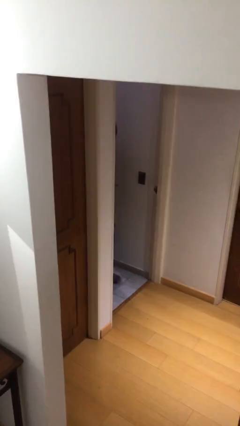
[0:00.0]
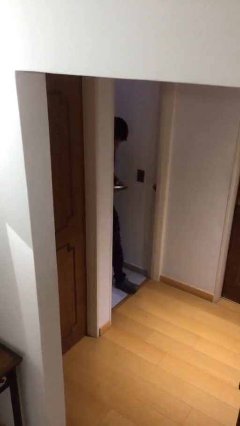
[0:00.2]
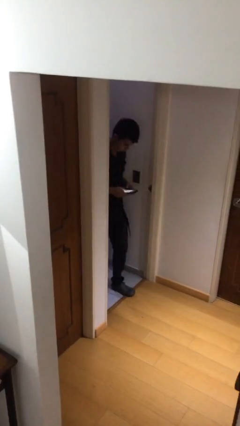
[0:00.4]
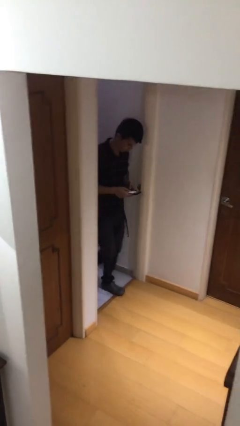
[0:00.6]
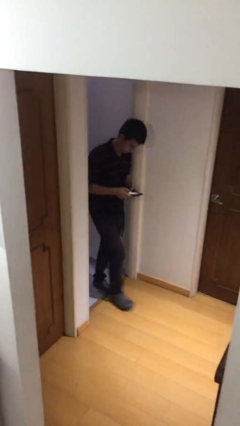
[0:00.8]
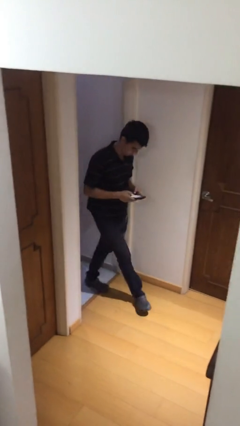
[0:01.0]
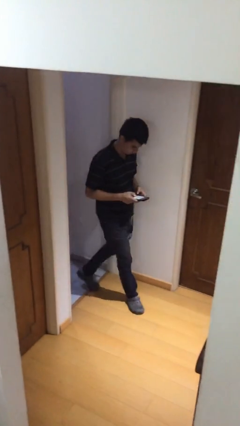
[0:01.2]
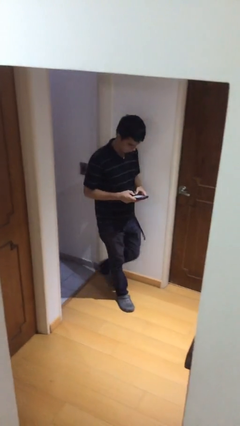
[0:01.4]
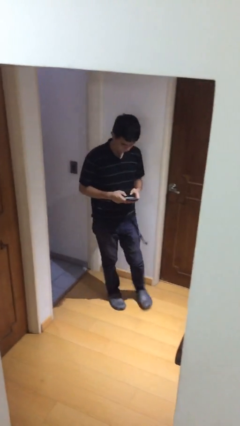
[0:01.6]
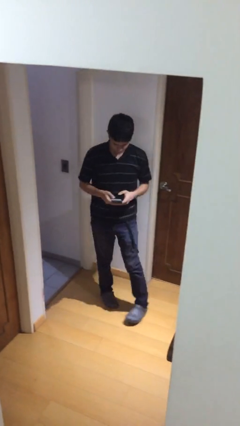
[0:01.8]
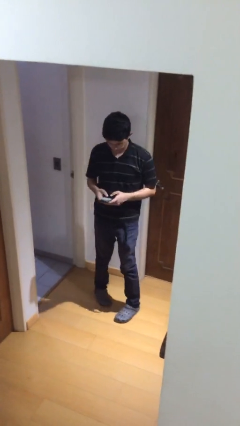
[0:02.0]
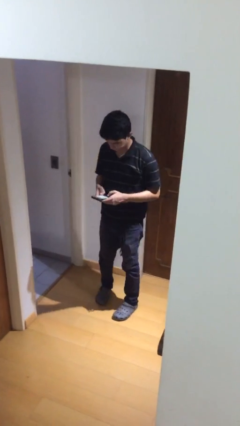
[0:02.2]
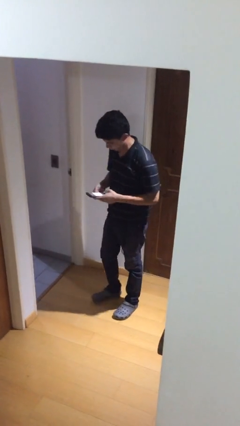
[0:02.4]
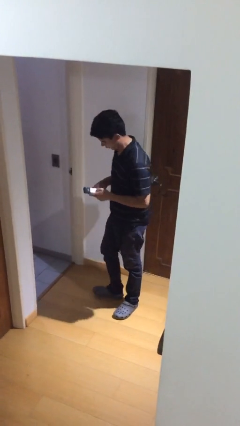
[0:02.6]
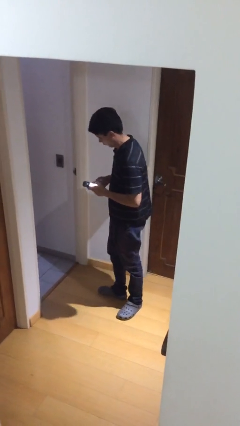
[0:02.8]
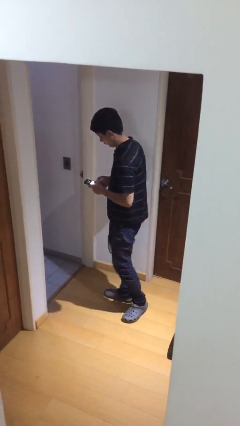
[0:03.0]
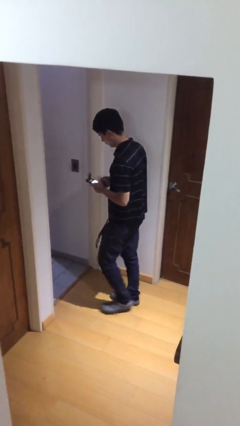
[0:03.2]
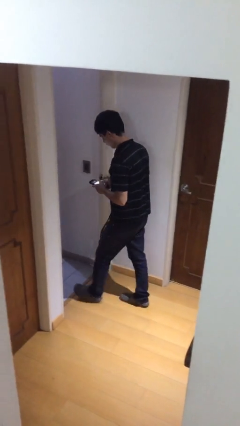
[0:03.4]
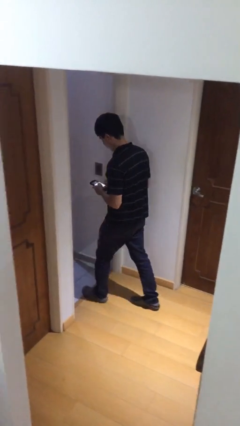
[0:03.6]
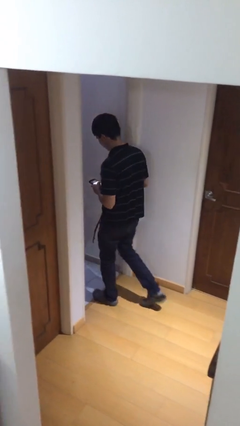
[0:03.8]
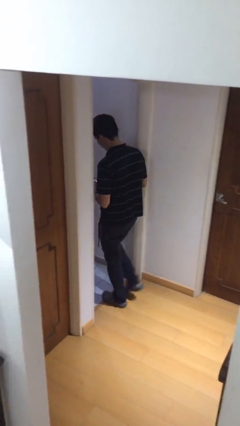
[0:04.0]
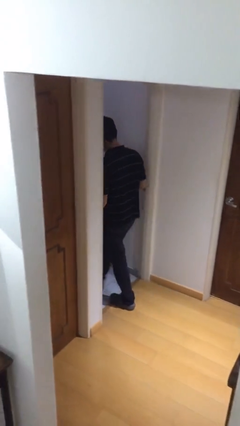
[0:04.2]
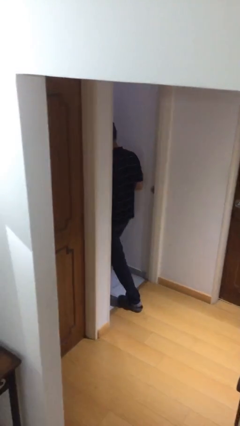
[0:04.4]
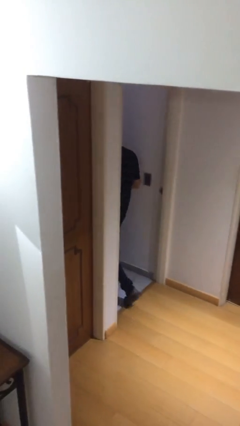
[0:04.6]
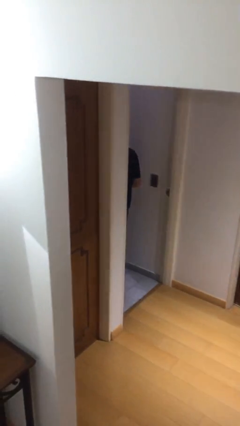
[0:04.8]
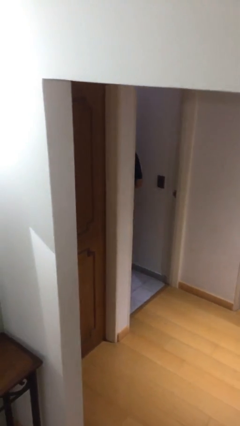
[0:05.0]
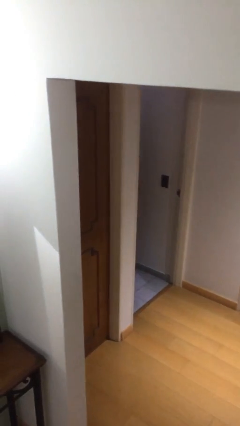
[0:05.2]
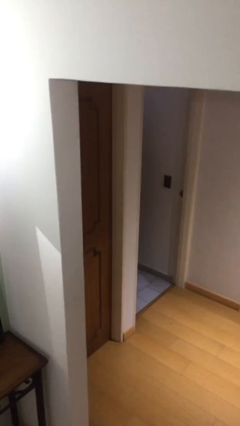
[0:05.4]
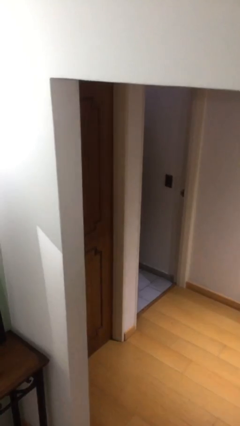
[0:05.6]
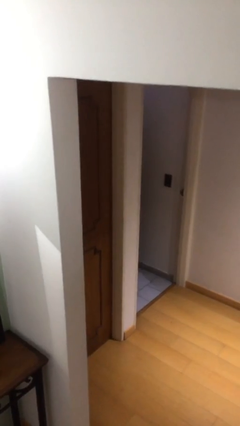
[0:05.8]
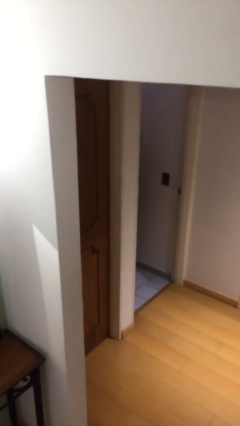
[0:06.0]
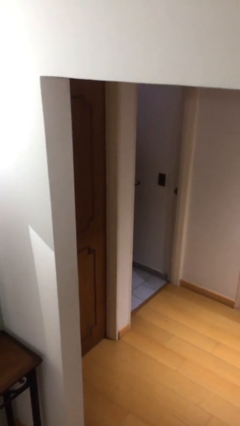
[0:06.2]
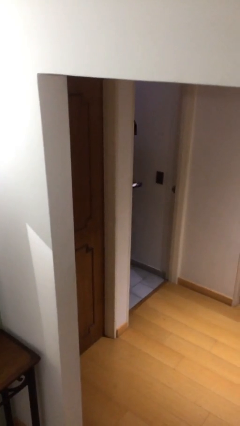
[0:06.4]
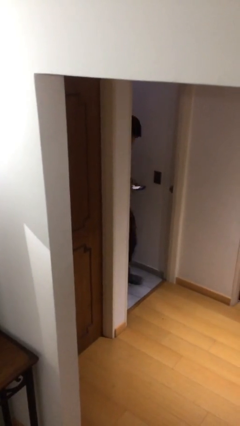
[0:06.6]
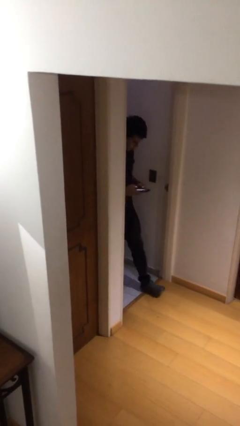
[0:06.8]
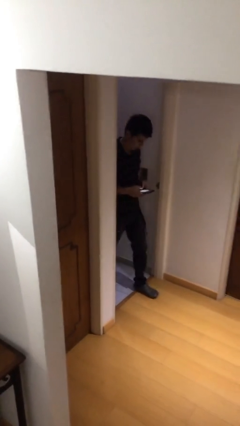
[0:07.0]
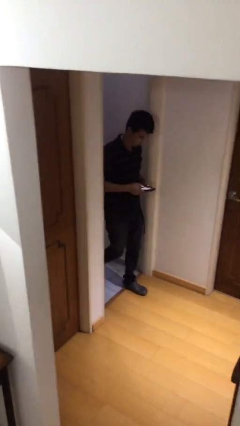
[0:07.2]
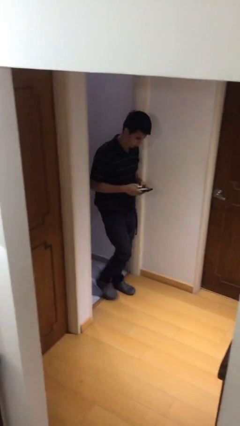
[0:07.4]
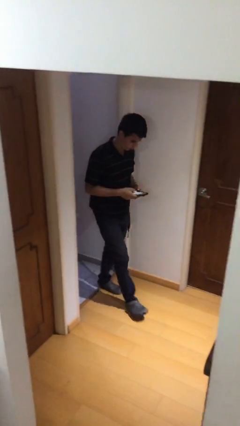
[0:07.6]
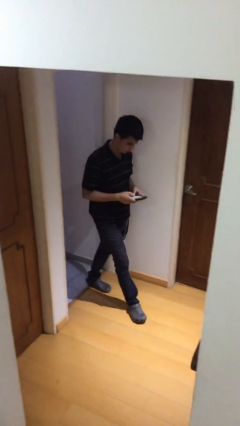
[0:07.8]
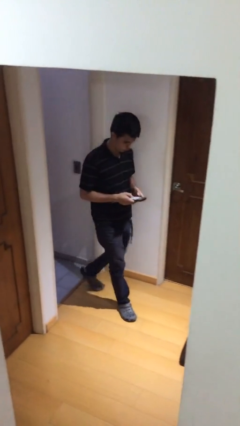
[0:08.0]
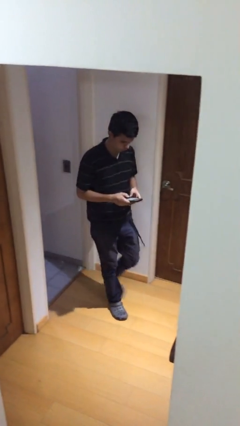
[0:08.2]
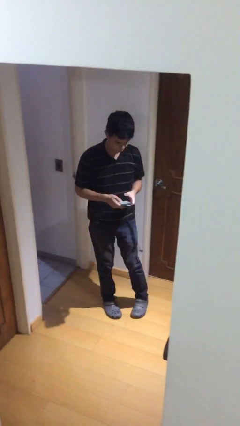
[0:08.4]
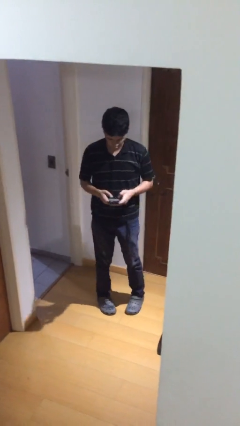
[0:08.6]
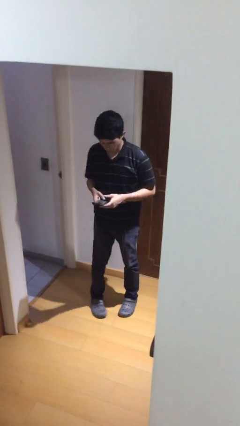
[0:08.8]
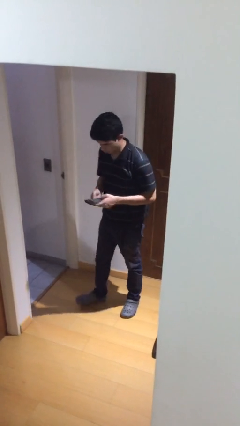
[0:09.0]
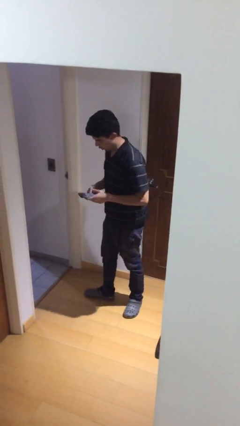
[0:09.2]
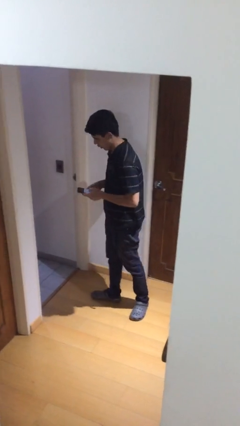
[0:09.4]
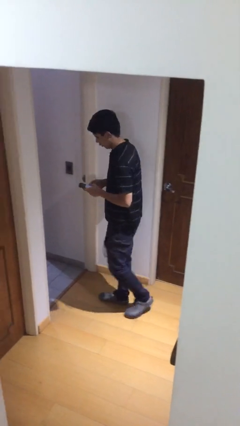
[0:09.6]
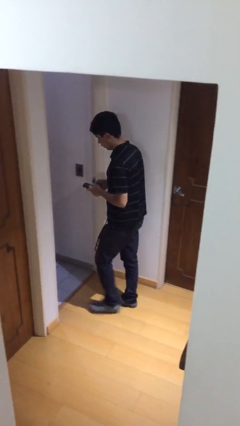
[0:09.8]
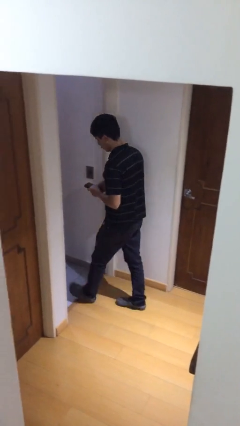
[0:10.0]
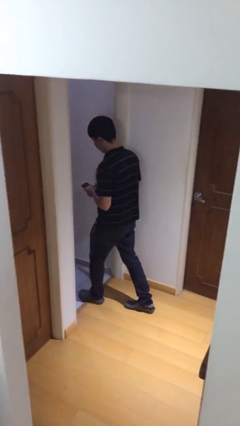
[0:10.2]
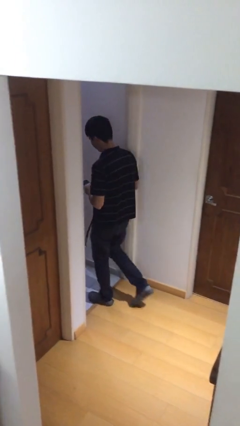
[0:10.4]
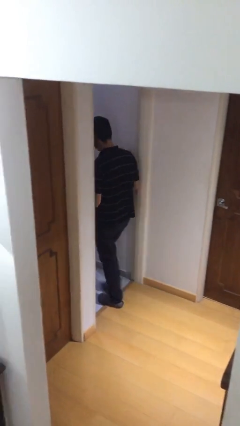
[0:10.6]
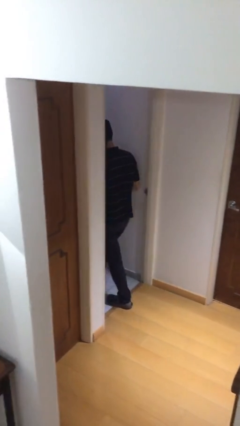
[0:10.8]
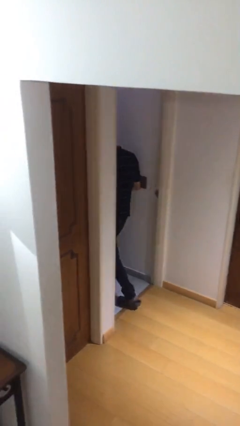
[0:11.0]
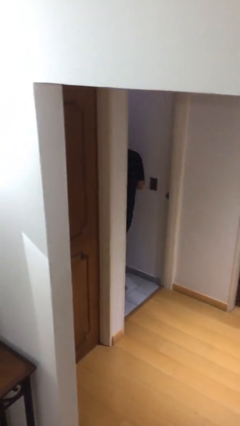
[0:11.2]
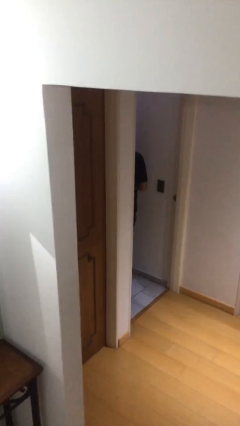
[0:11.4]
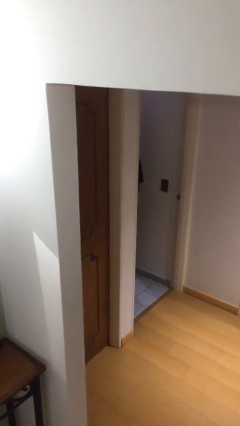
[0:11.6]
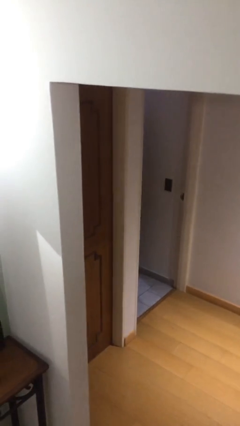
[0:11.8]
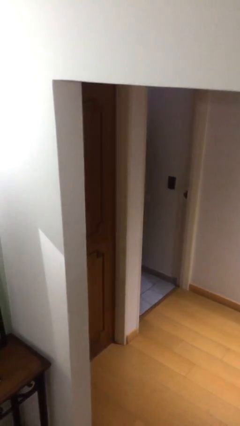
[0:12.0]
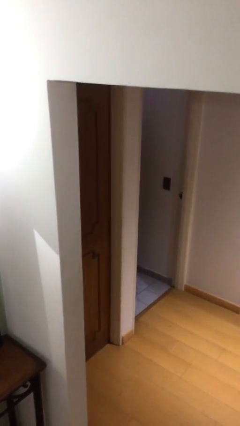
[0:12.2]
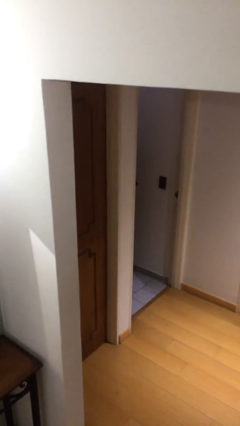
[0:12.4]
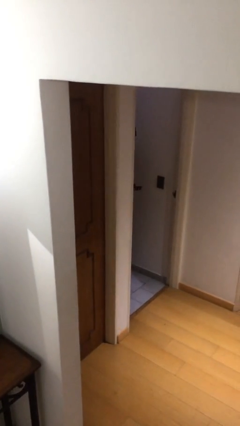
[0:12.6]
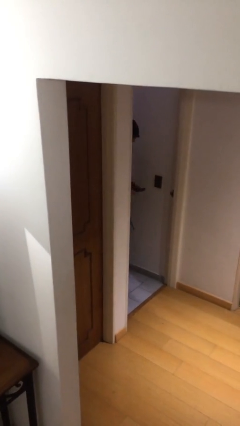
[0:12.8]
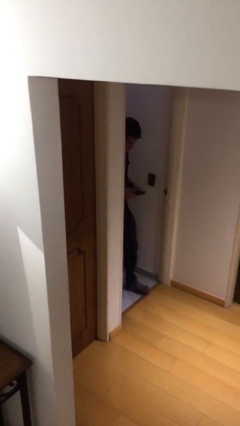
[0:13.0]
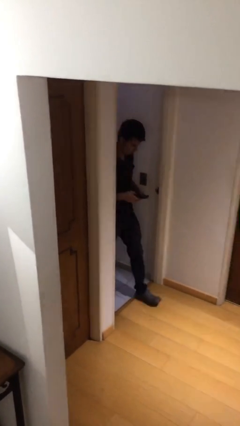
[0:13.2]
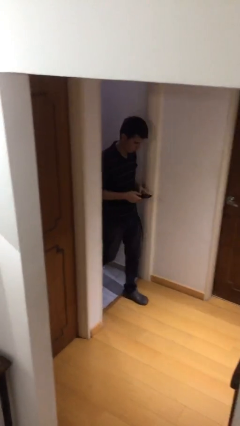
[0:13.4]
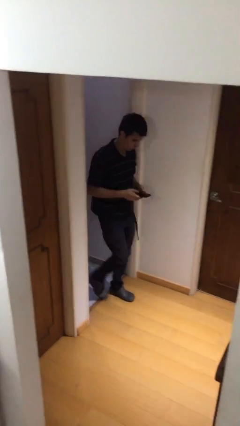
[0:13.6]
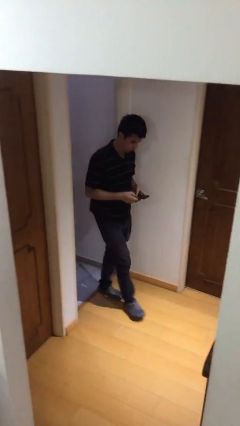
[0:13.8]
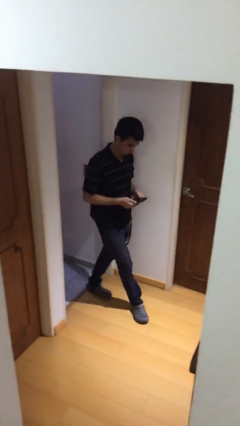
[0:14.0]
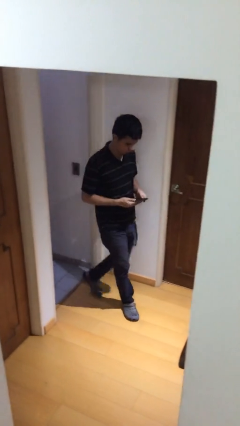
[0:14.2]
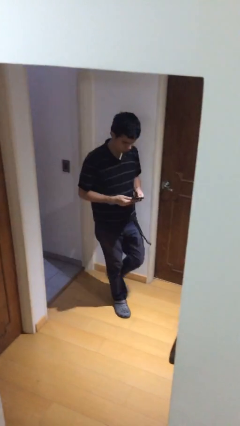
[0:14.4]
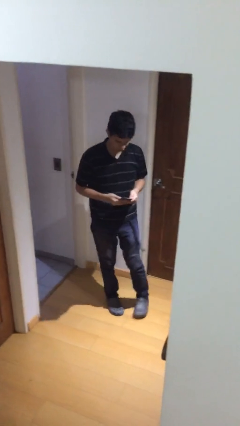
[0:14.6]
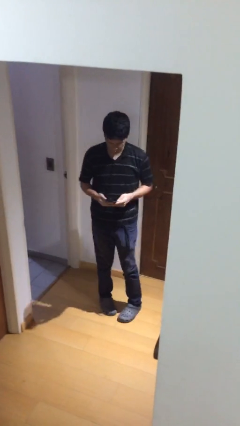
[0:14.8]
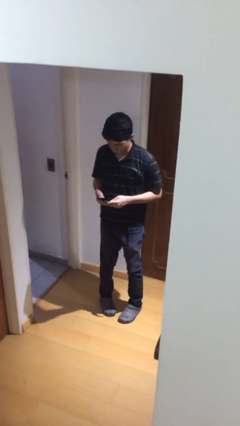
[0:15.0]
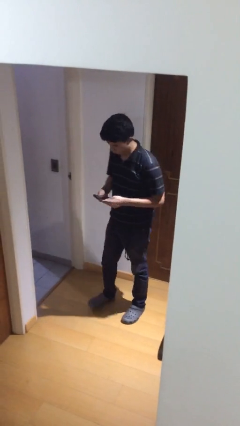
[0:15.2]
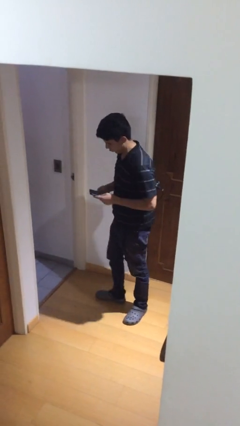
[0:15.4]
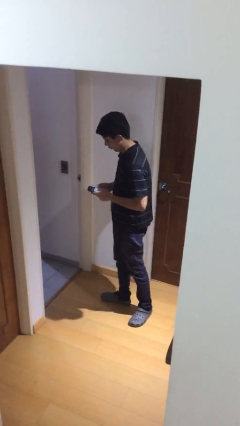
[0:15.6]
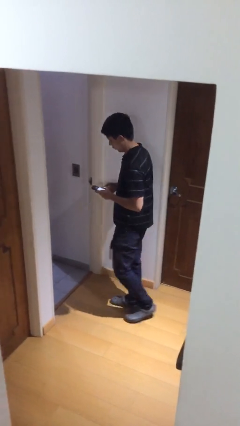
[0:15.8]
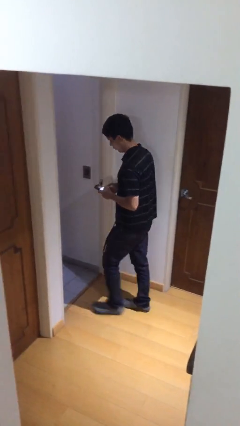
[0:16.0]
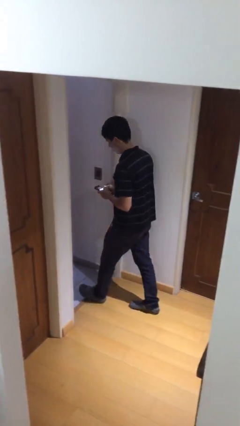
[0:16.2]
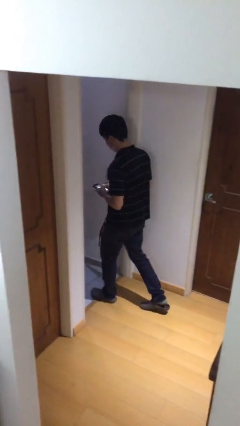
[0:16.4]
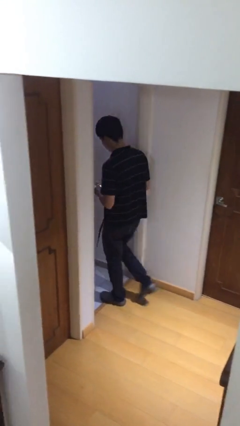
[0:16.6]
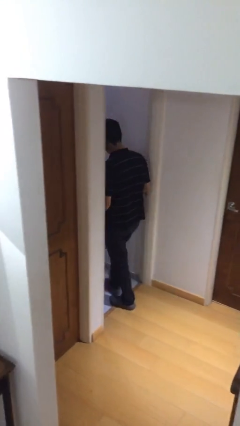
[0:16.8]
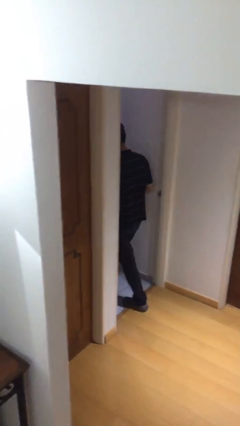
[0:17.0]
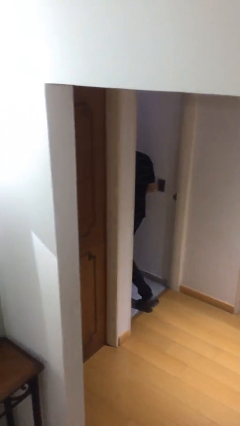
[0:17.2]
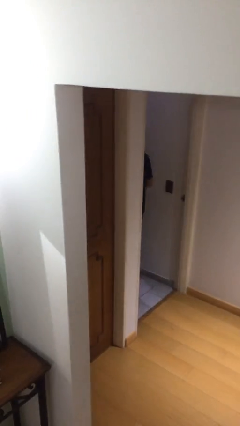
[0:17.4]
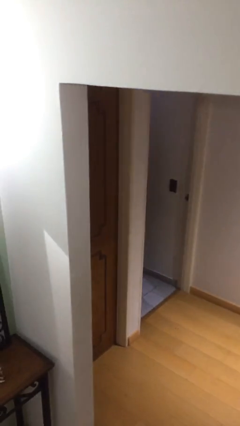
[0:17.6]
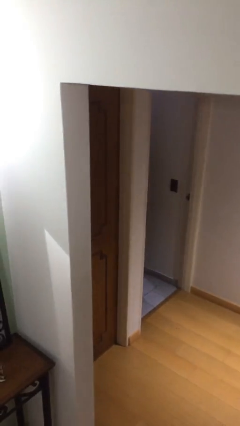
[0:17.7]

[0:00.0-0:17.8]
person texts on phone

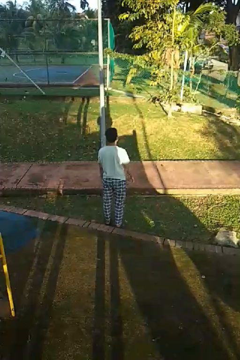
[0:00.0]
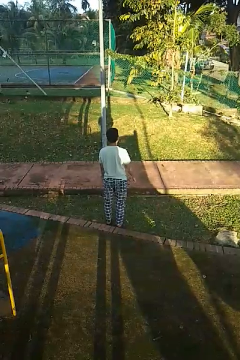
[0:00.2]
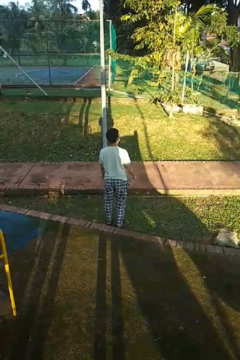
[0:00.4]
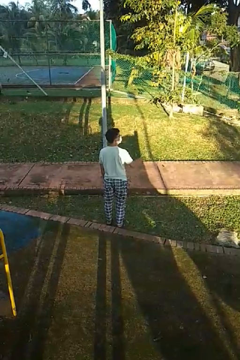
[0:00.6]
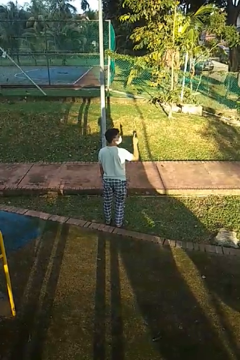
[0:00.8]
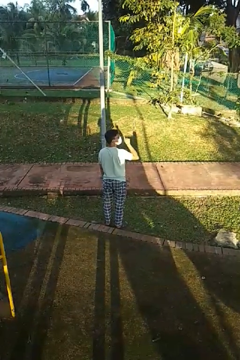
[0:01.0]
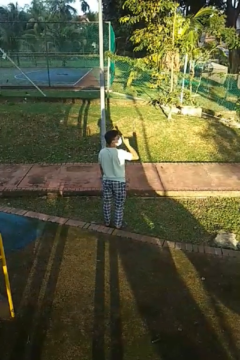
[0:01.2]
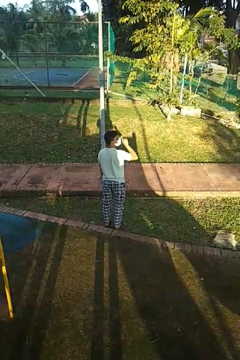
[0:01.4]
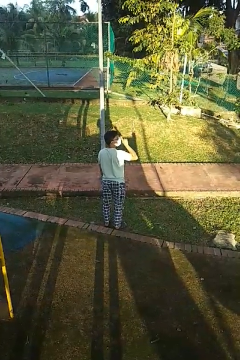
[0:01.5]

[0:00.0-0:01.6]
person gestures be quiet
